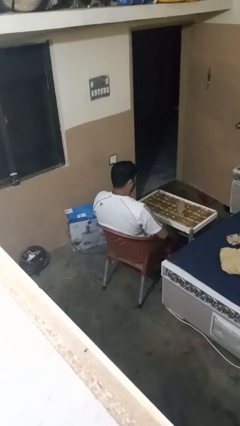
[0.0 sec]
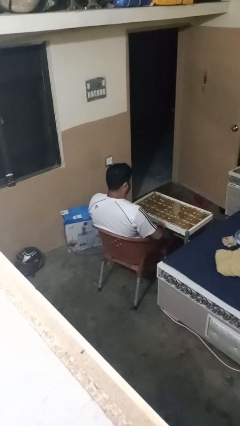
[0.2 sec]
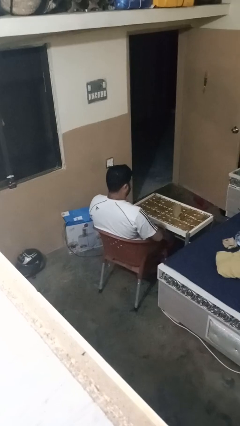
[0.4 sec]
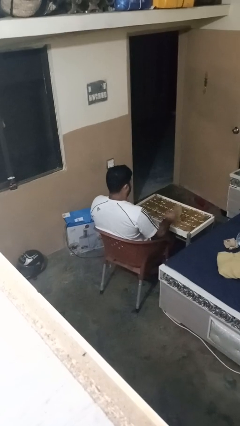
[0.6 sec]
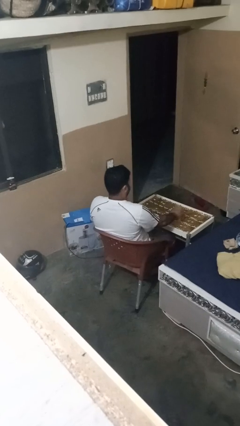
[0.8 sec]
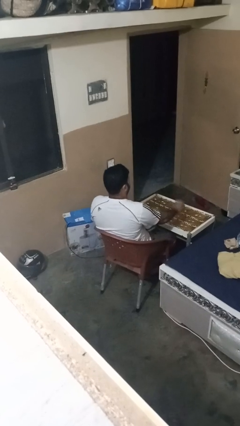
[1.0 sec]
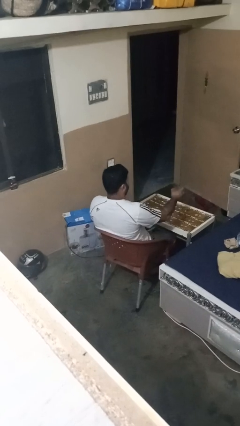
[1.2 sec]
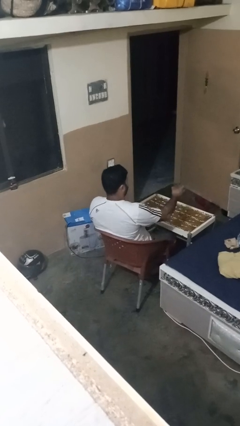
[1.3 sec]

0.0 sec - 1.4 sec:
person picks up object from table

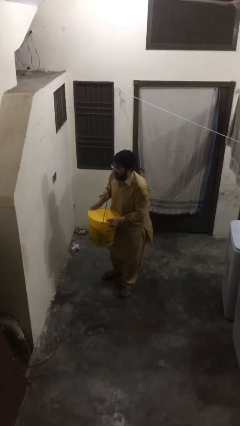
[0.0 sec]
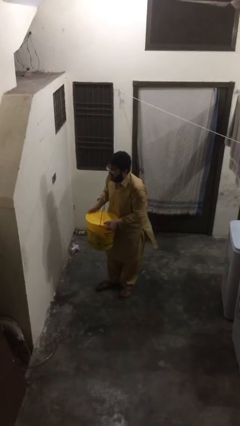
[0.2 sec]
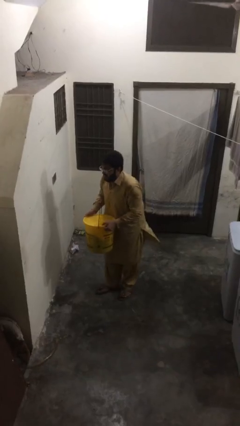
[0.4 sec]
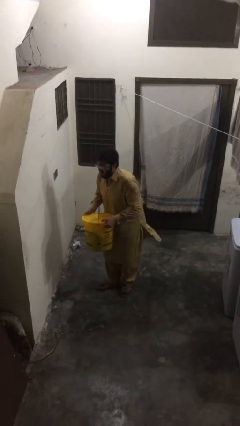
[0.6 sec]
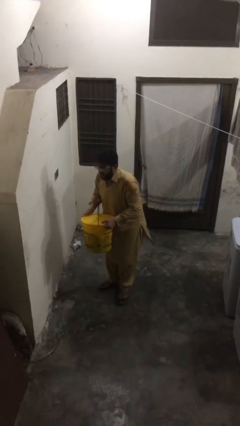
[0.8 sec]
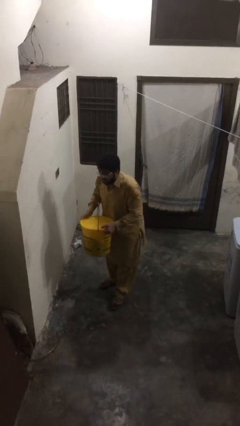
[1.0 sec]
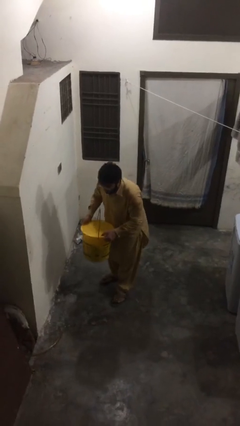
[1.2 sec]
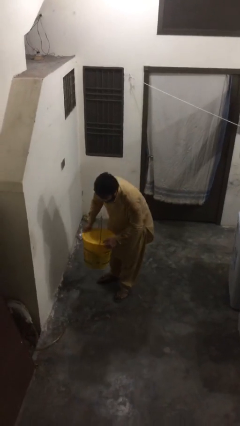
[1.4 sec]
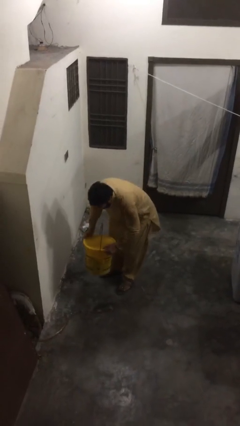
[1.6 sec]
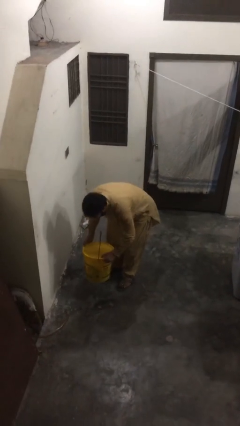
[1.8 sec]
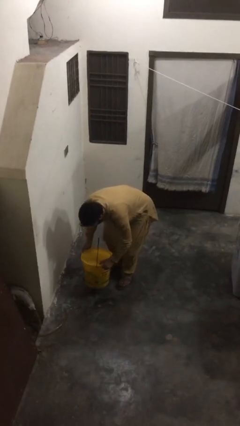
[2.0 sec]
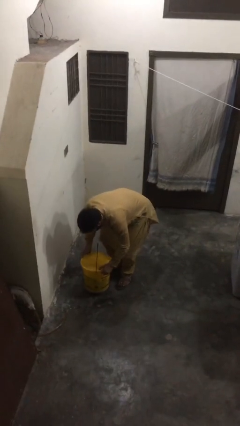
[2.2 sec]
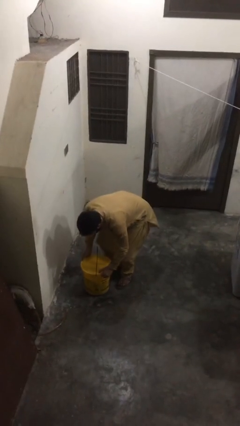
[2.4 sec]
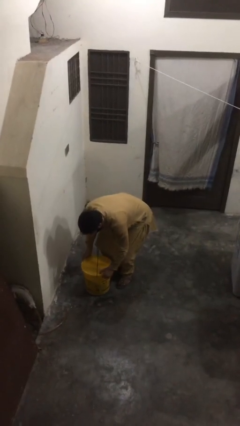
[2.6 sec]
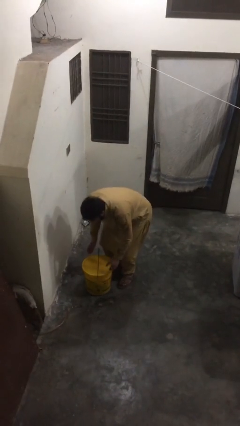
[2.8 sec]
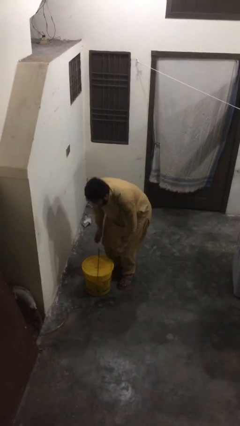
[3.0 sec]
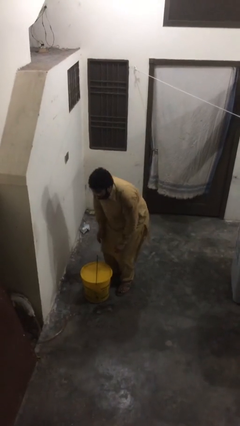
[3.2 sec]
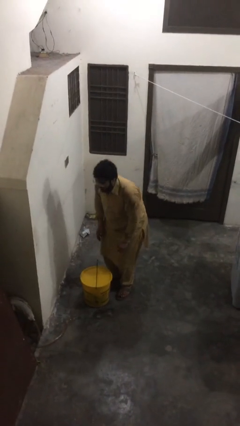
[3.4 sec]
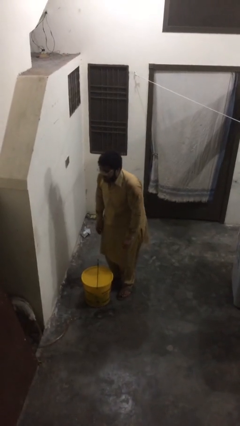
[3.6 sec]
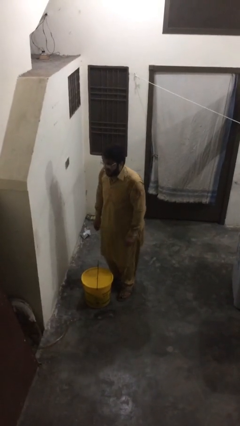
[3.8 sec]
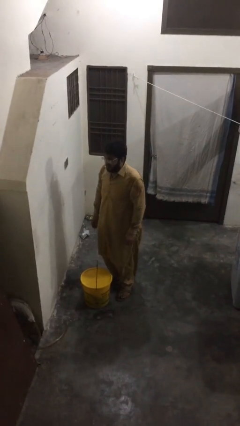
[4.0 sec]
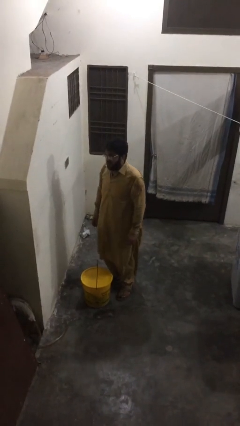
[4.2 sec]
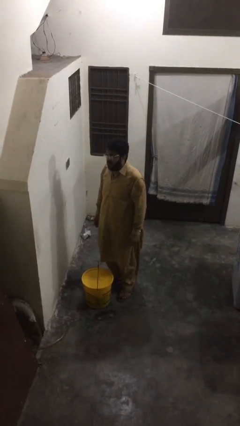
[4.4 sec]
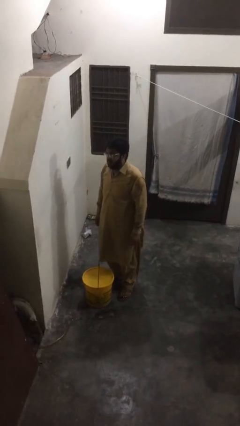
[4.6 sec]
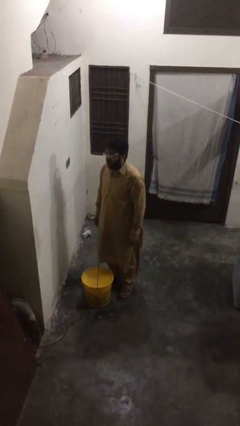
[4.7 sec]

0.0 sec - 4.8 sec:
person puts down object on floor

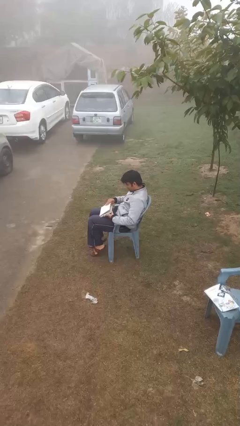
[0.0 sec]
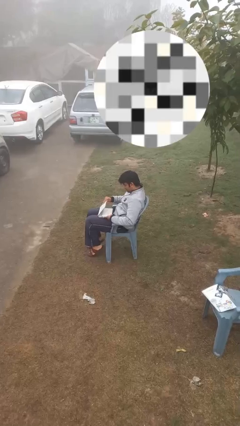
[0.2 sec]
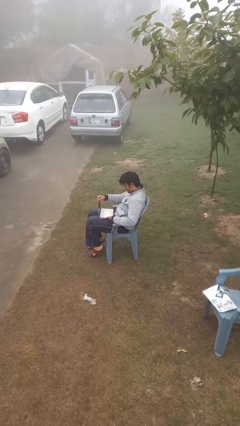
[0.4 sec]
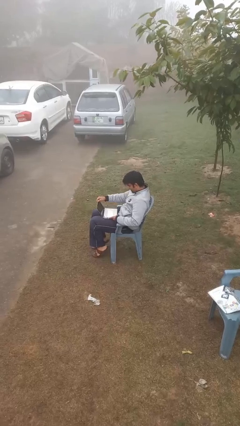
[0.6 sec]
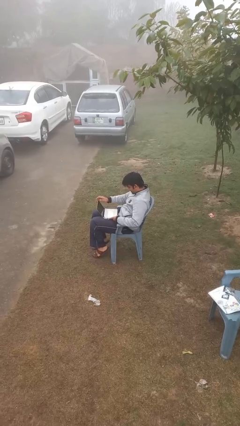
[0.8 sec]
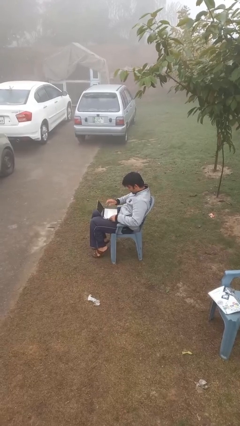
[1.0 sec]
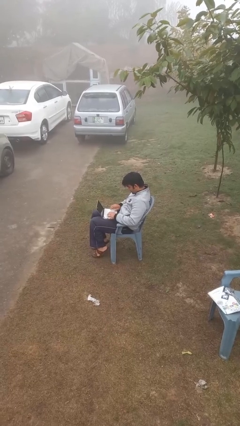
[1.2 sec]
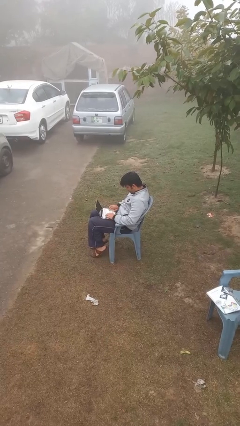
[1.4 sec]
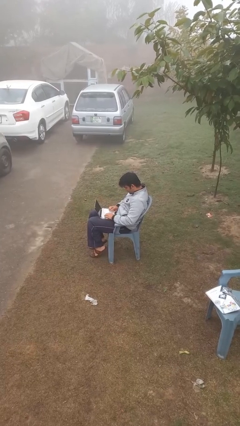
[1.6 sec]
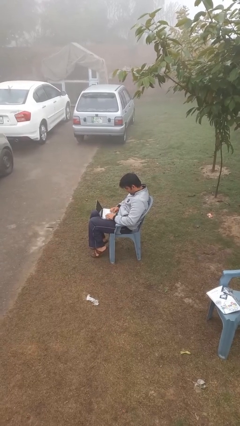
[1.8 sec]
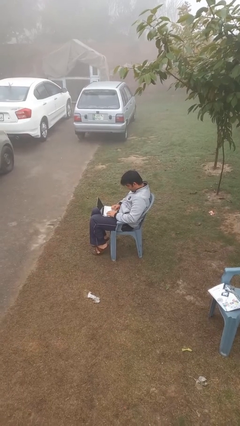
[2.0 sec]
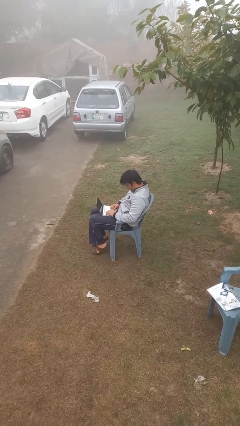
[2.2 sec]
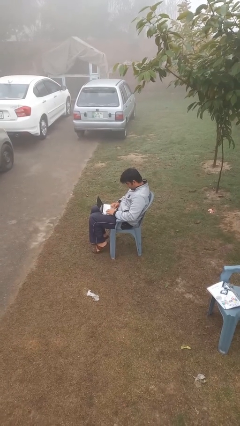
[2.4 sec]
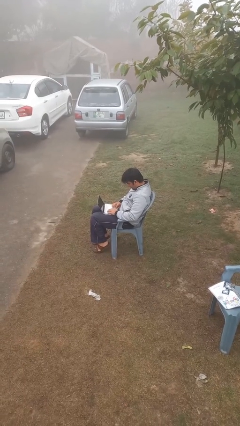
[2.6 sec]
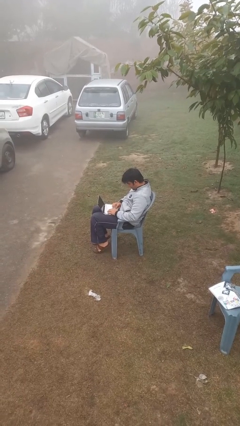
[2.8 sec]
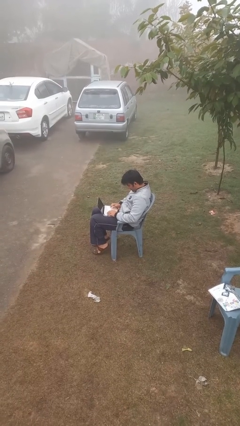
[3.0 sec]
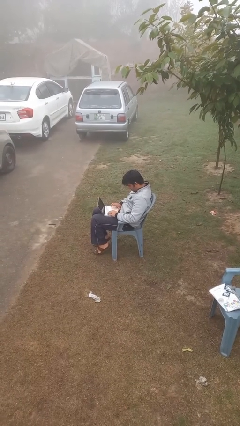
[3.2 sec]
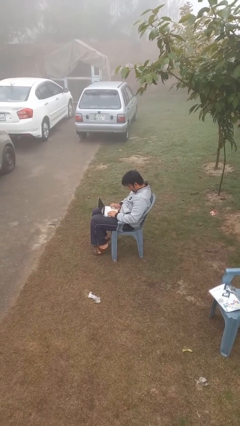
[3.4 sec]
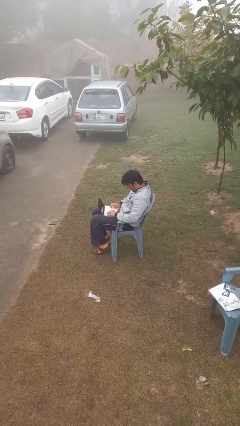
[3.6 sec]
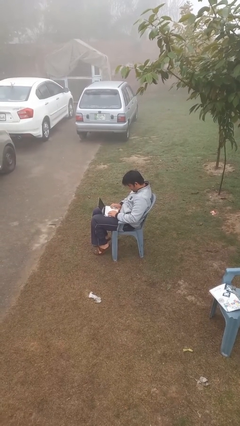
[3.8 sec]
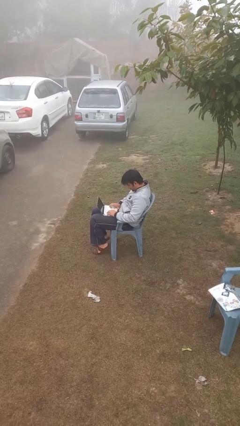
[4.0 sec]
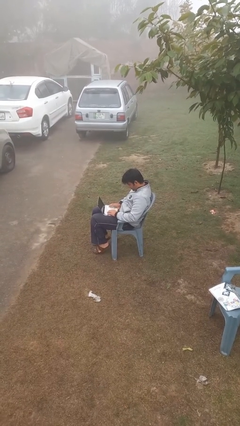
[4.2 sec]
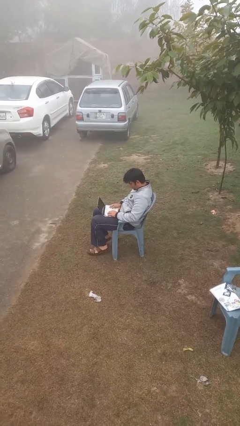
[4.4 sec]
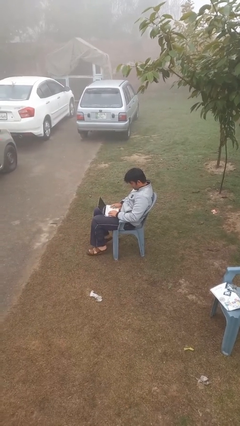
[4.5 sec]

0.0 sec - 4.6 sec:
person interacts with laptop

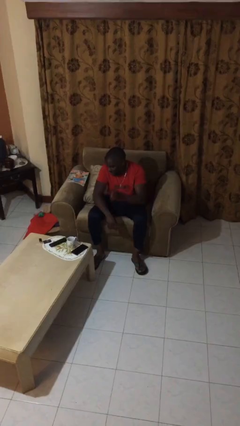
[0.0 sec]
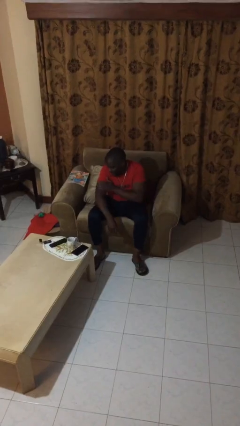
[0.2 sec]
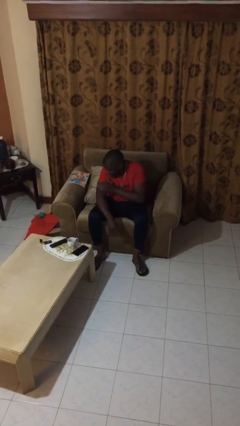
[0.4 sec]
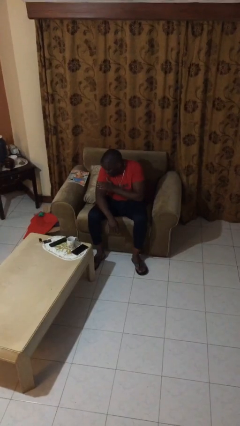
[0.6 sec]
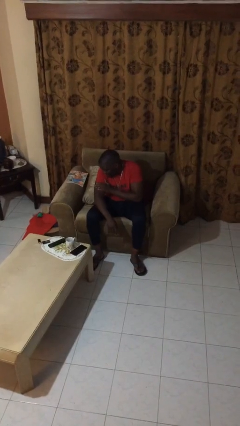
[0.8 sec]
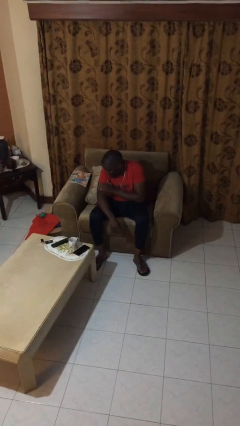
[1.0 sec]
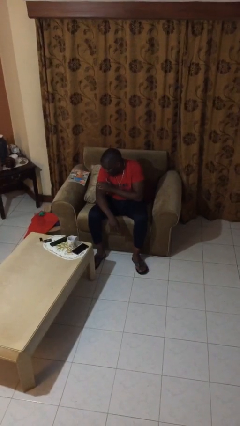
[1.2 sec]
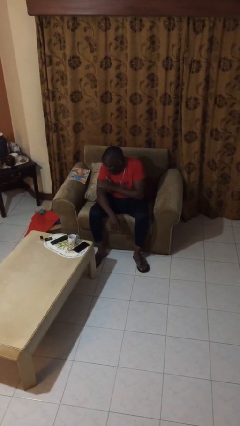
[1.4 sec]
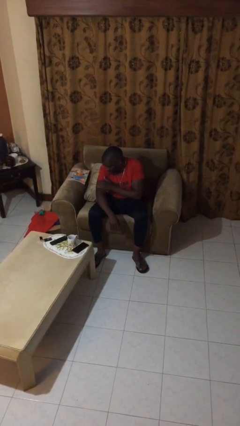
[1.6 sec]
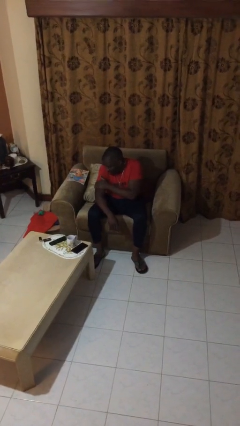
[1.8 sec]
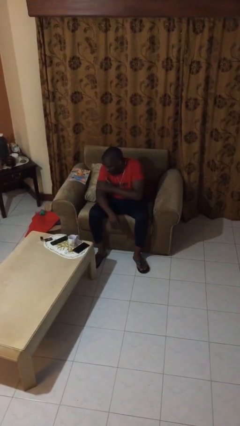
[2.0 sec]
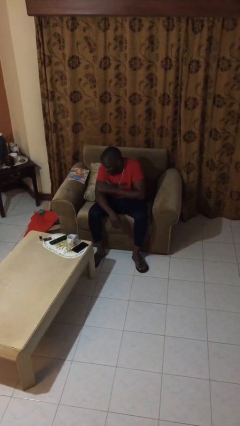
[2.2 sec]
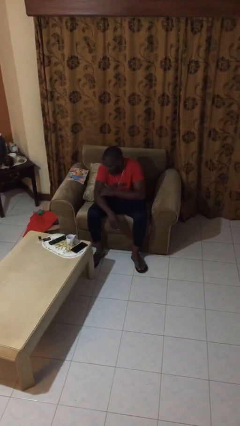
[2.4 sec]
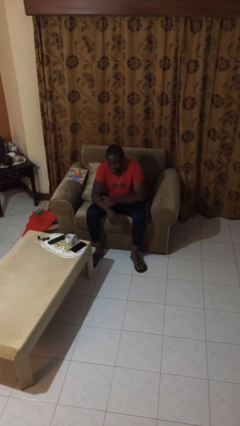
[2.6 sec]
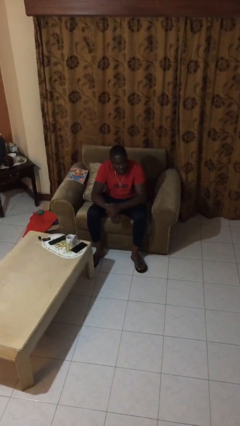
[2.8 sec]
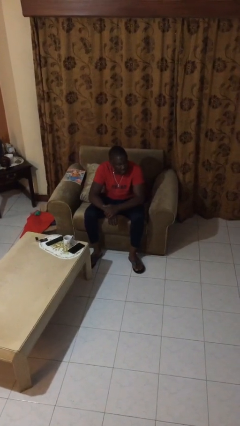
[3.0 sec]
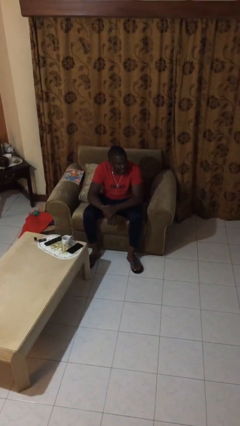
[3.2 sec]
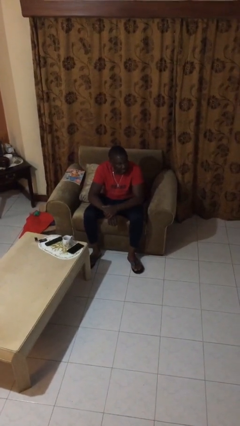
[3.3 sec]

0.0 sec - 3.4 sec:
person swats bug

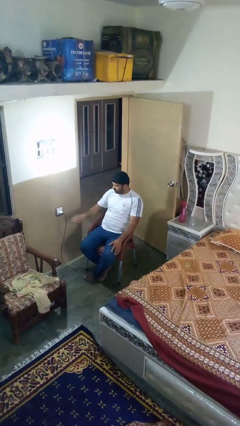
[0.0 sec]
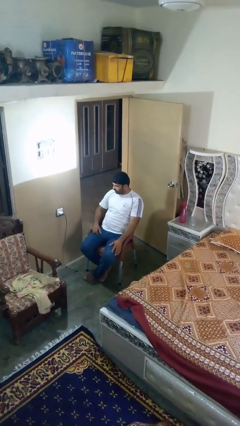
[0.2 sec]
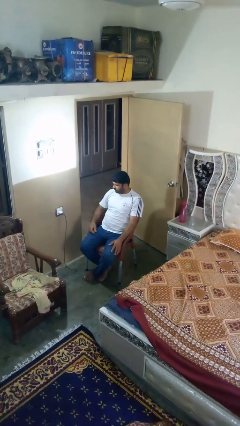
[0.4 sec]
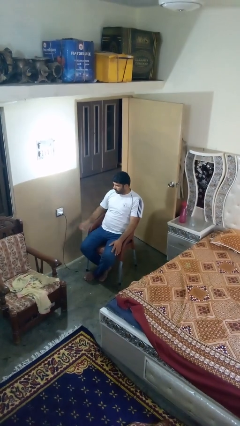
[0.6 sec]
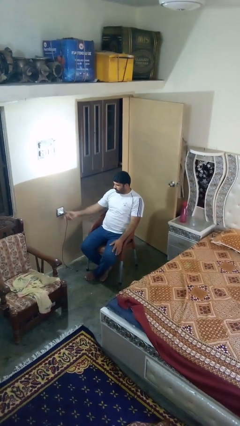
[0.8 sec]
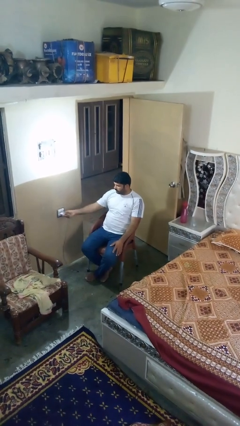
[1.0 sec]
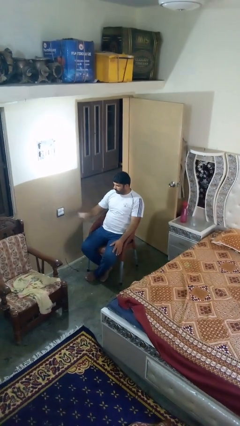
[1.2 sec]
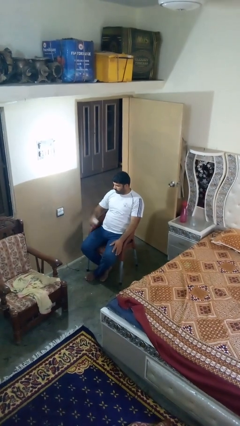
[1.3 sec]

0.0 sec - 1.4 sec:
person unplugs from electrical socket

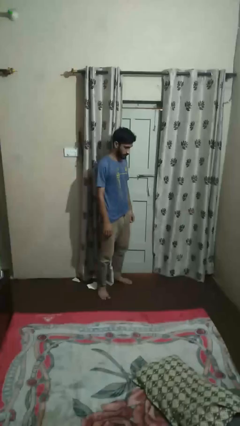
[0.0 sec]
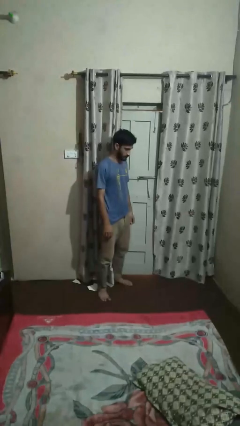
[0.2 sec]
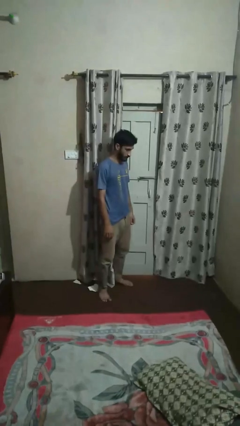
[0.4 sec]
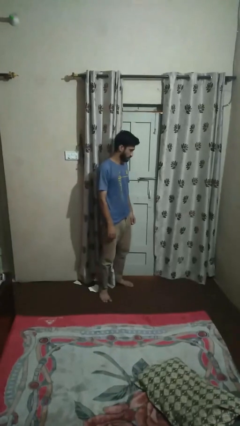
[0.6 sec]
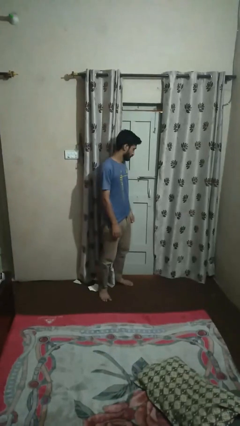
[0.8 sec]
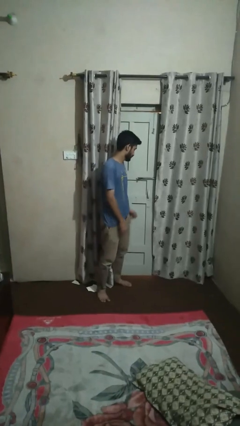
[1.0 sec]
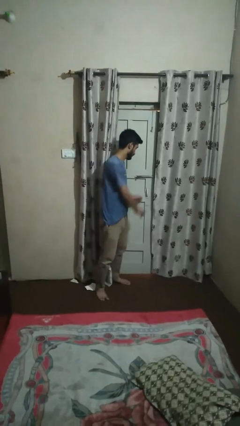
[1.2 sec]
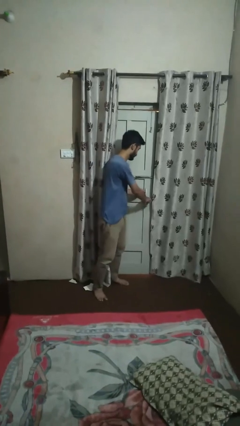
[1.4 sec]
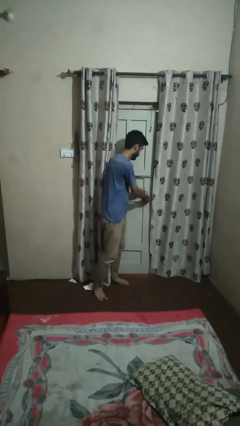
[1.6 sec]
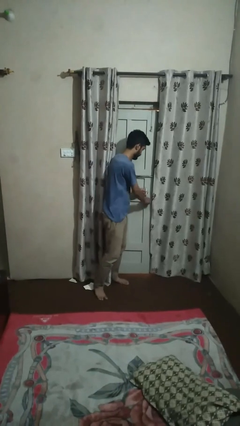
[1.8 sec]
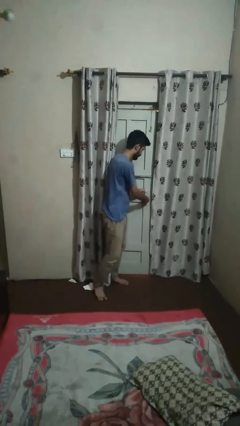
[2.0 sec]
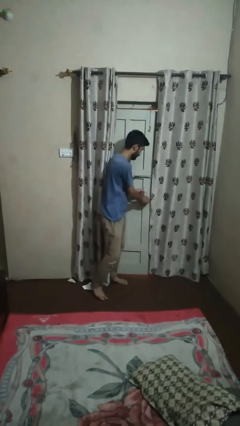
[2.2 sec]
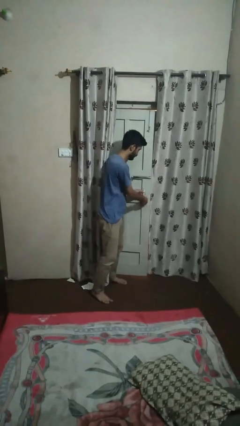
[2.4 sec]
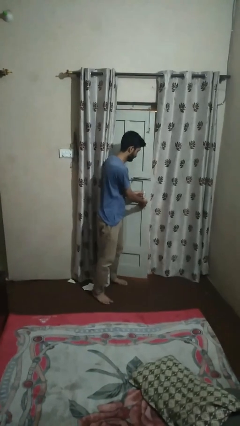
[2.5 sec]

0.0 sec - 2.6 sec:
person unlocks door with keys
